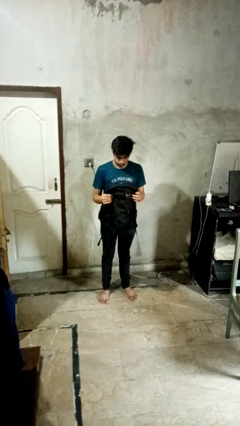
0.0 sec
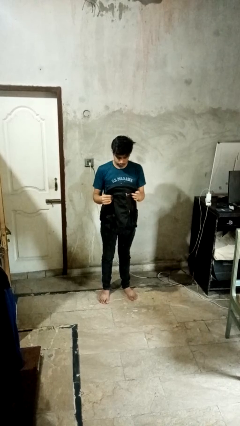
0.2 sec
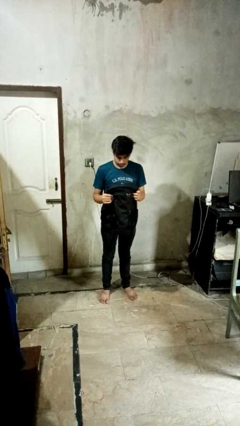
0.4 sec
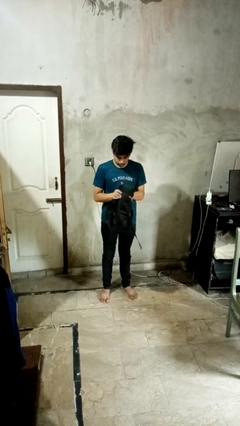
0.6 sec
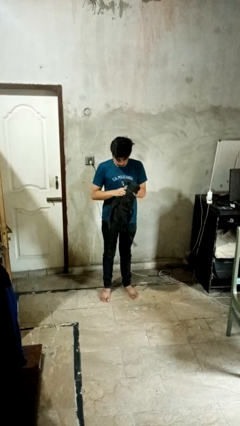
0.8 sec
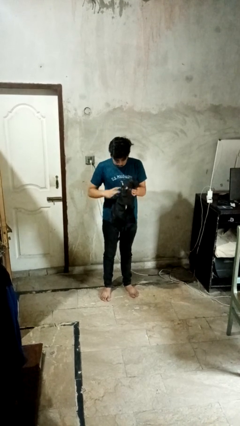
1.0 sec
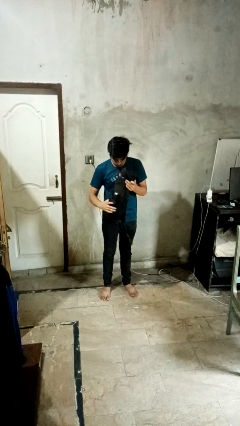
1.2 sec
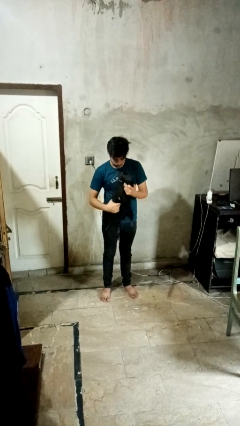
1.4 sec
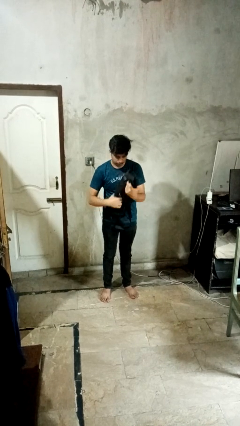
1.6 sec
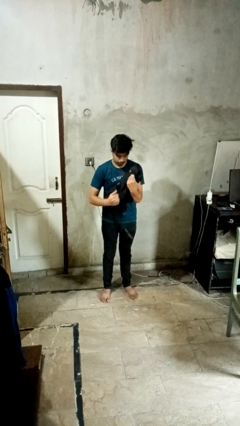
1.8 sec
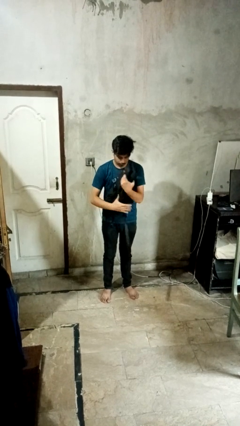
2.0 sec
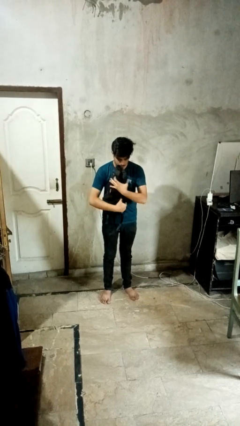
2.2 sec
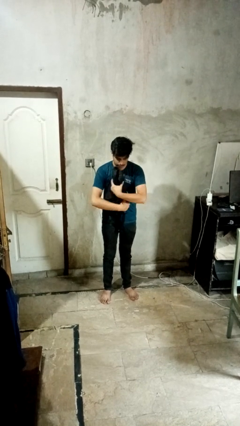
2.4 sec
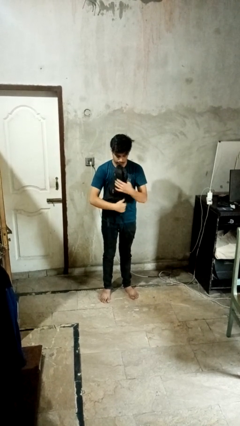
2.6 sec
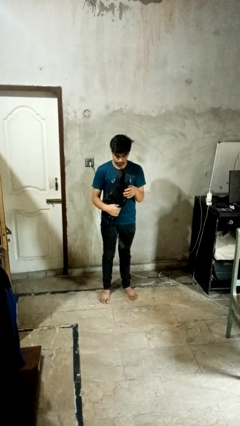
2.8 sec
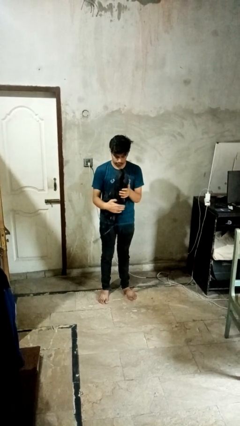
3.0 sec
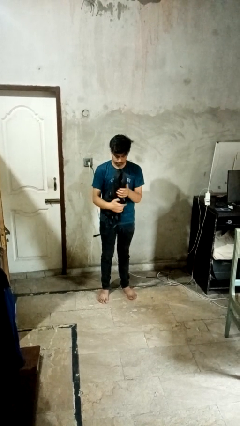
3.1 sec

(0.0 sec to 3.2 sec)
person squeezes object

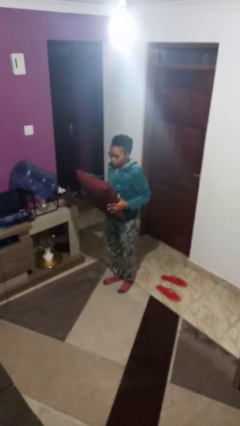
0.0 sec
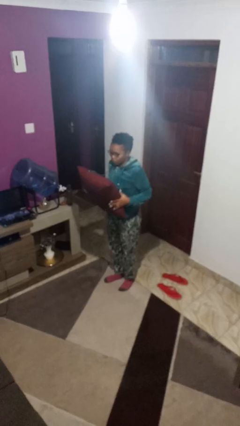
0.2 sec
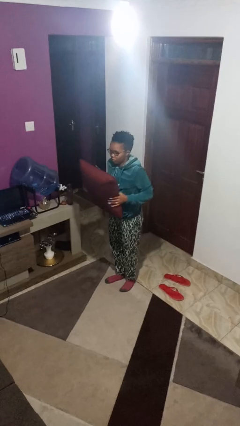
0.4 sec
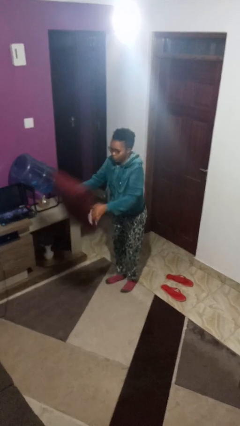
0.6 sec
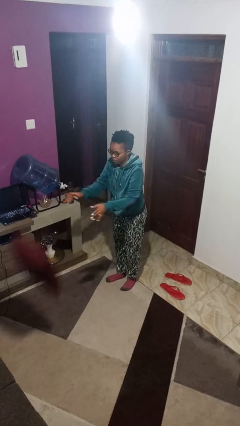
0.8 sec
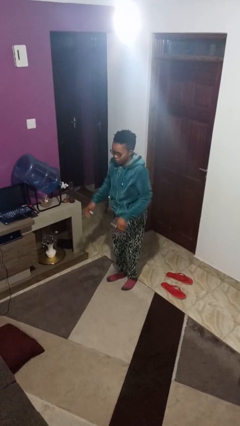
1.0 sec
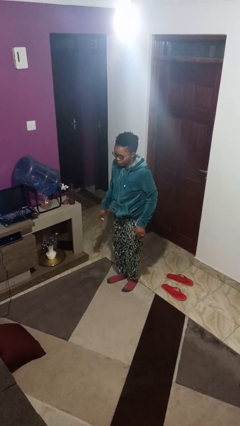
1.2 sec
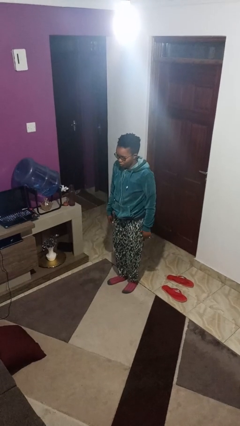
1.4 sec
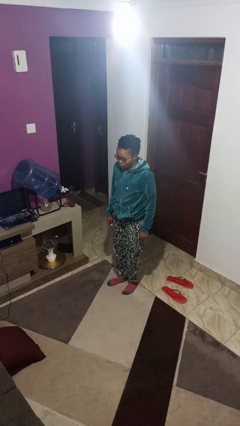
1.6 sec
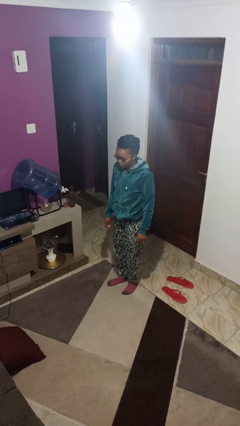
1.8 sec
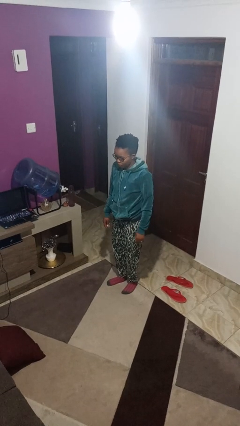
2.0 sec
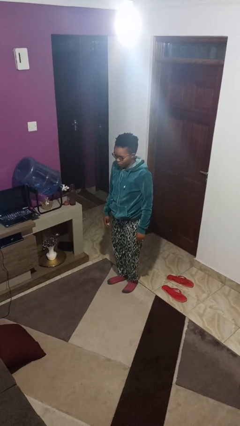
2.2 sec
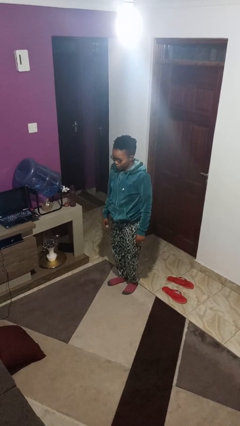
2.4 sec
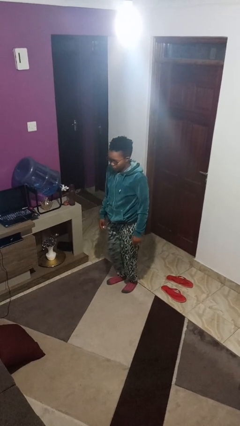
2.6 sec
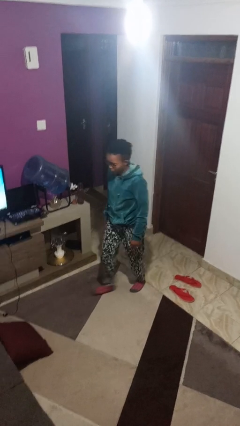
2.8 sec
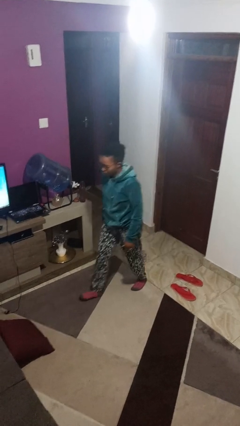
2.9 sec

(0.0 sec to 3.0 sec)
person throws object to ground

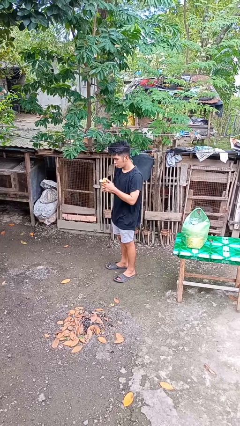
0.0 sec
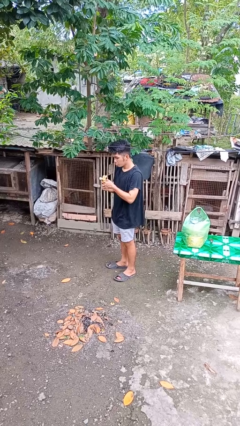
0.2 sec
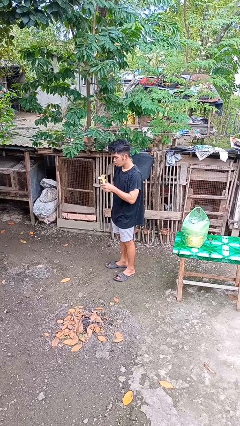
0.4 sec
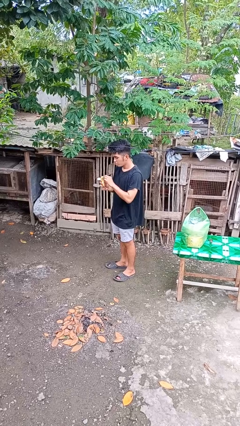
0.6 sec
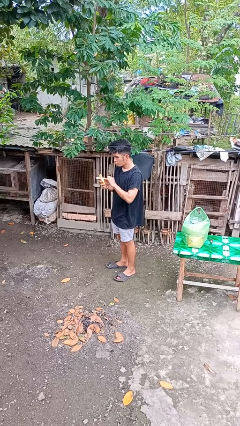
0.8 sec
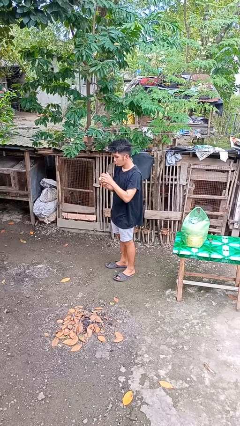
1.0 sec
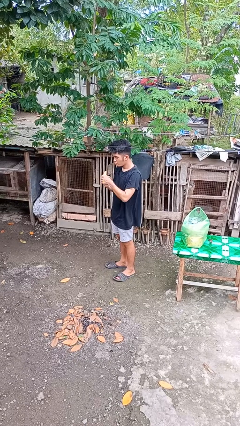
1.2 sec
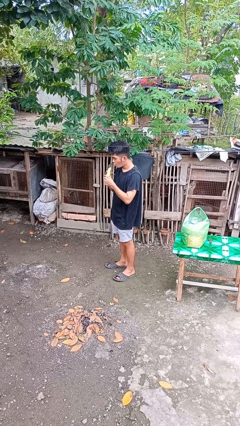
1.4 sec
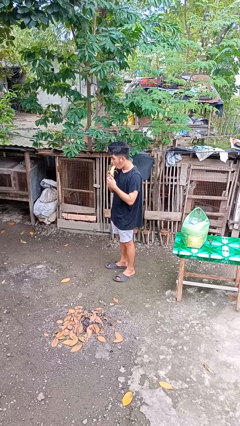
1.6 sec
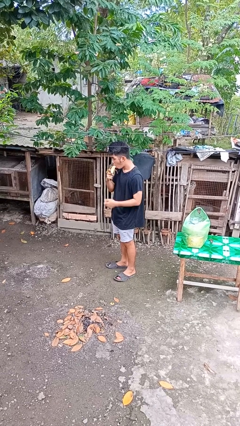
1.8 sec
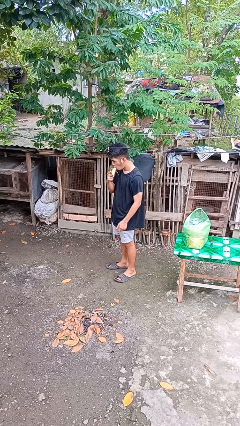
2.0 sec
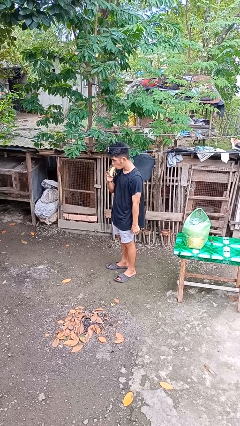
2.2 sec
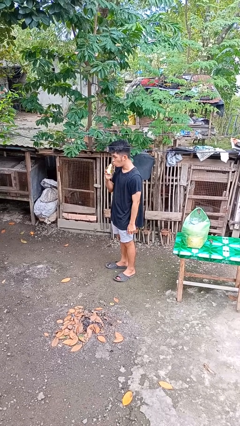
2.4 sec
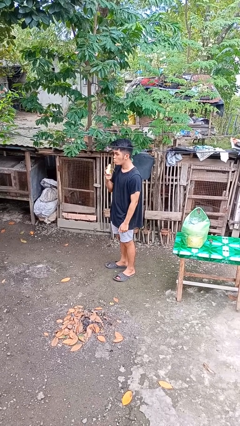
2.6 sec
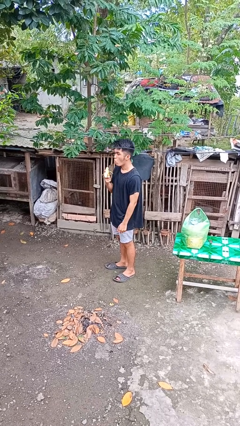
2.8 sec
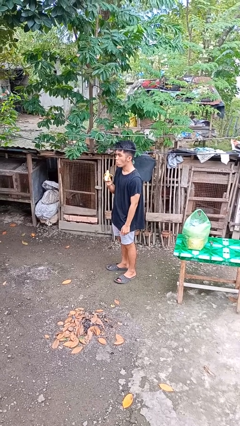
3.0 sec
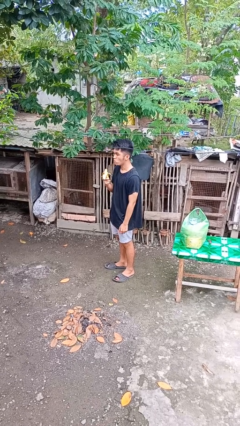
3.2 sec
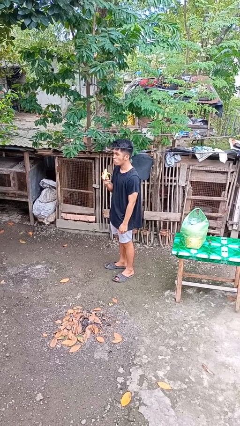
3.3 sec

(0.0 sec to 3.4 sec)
person eats banana

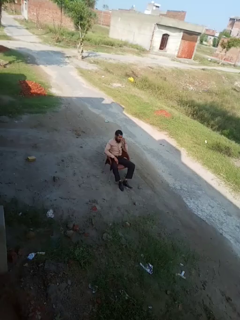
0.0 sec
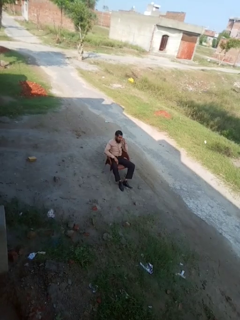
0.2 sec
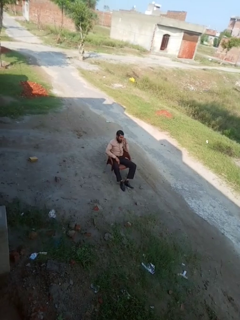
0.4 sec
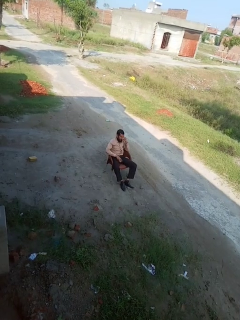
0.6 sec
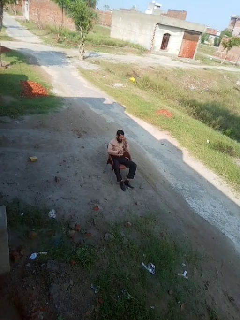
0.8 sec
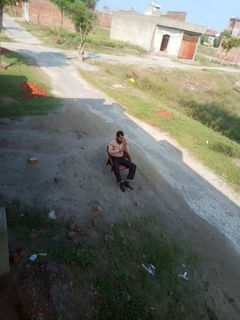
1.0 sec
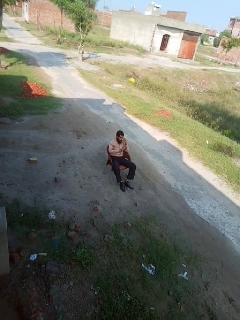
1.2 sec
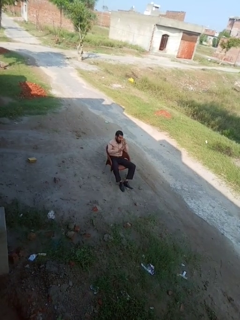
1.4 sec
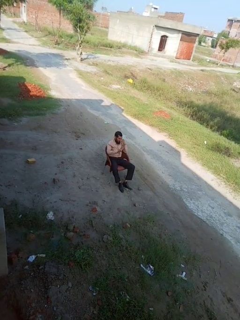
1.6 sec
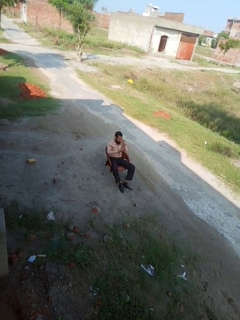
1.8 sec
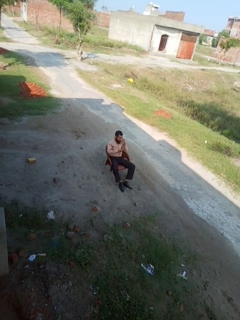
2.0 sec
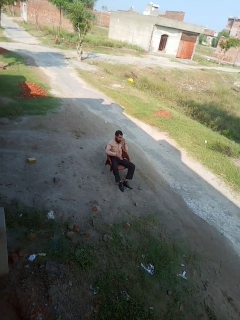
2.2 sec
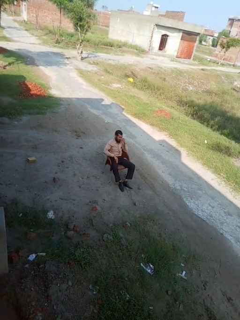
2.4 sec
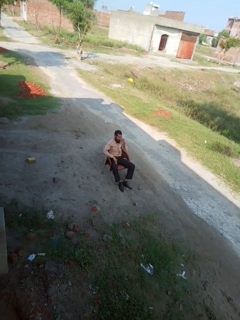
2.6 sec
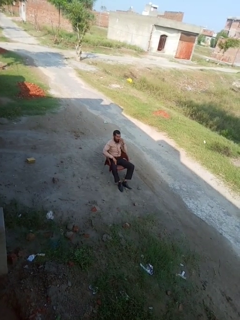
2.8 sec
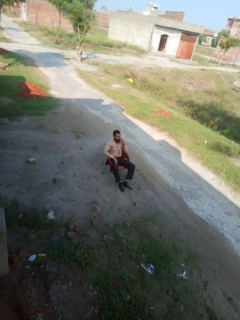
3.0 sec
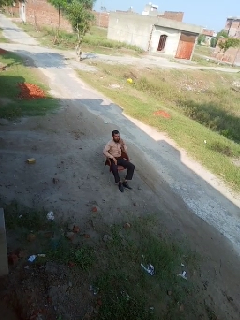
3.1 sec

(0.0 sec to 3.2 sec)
person gestures number three

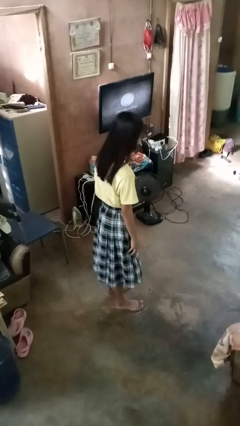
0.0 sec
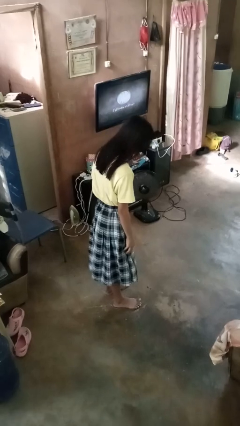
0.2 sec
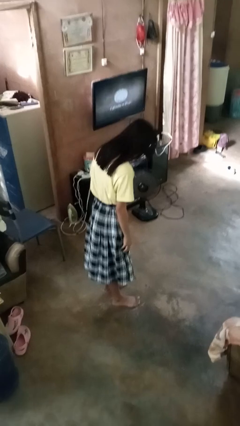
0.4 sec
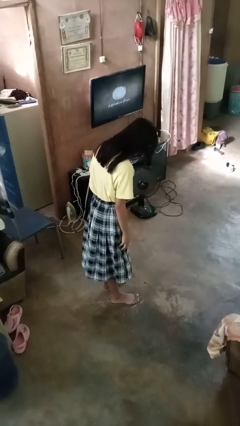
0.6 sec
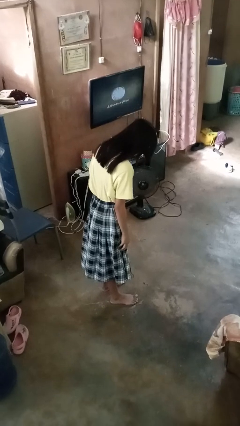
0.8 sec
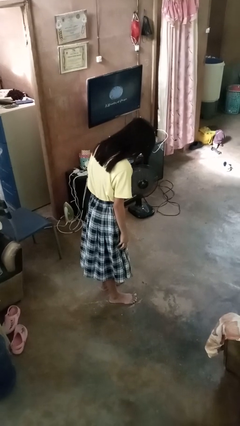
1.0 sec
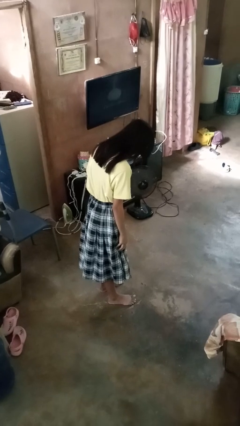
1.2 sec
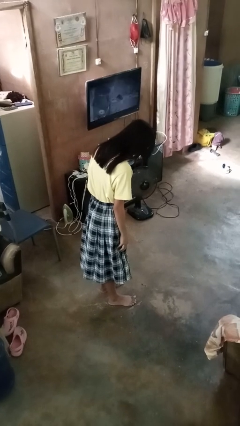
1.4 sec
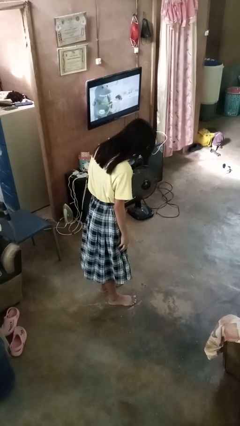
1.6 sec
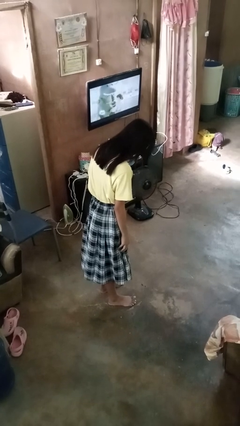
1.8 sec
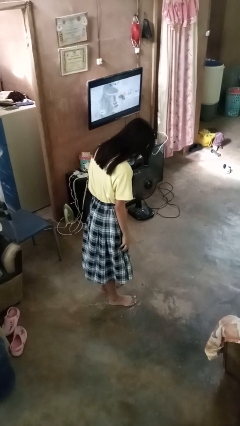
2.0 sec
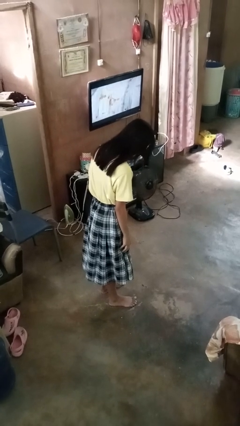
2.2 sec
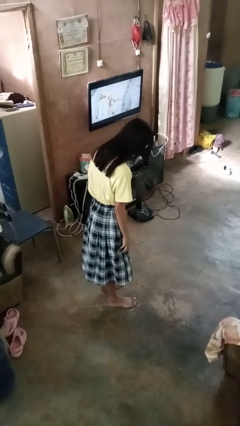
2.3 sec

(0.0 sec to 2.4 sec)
person bows

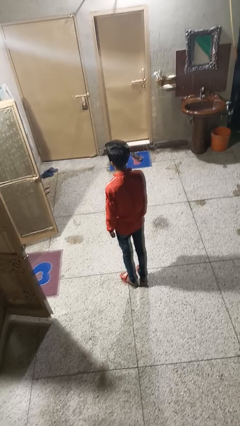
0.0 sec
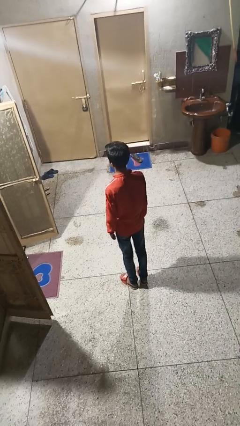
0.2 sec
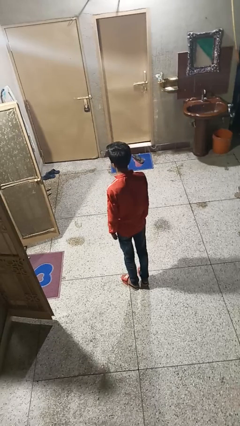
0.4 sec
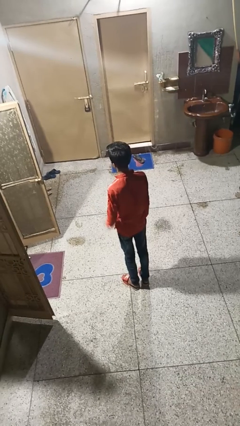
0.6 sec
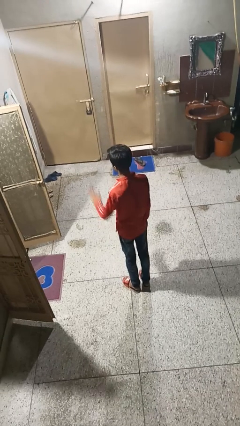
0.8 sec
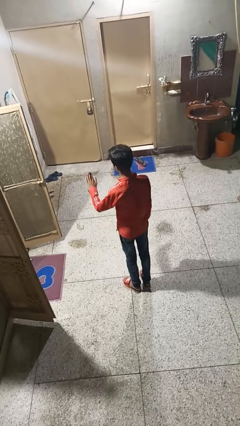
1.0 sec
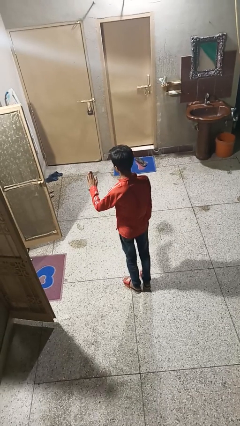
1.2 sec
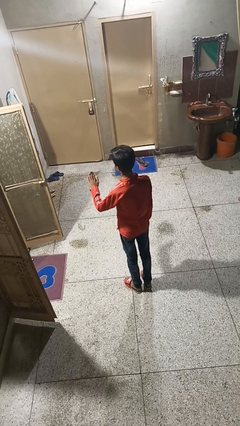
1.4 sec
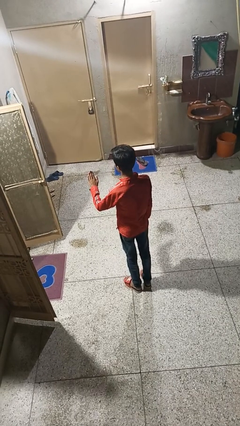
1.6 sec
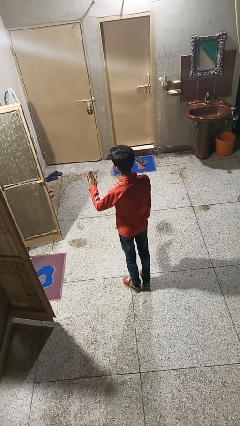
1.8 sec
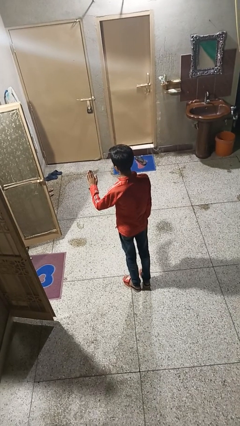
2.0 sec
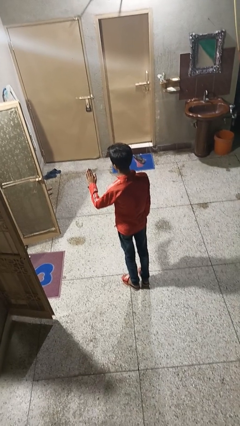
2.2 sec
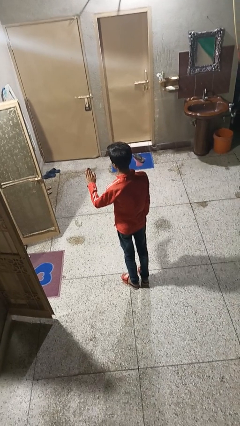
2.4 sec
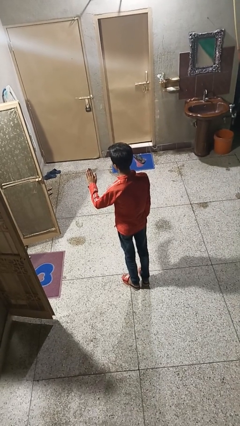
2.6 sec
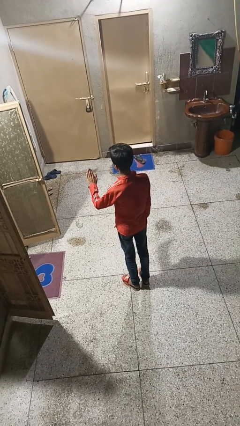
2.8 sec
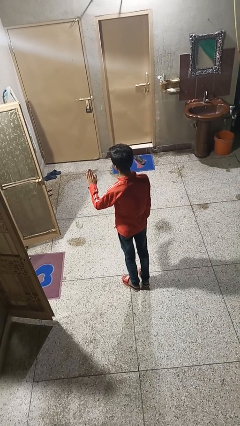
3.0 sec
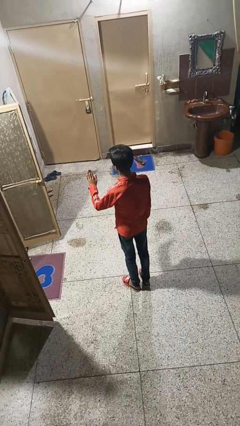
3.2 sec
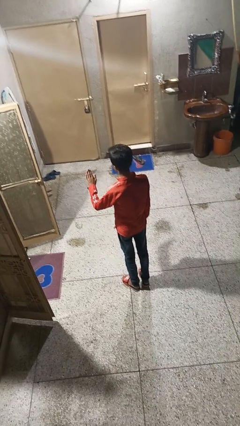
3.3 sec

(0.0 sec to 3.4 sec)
person gestures stop
